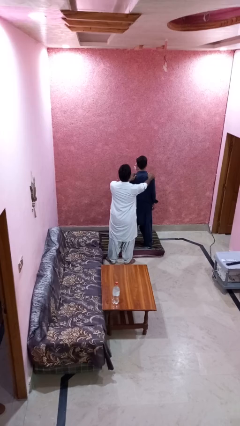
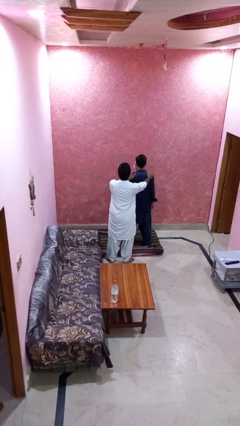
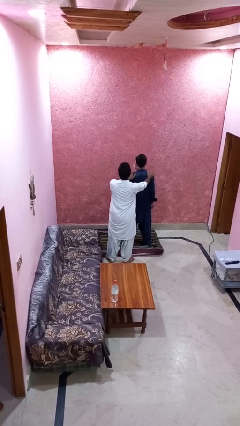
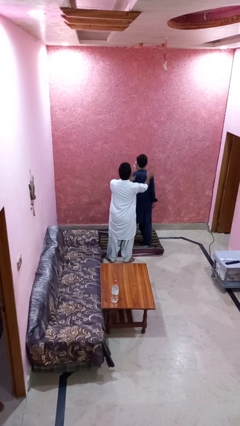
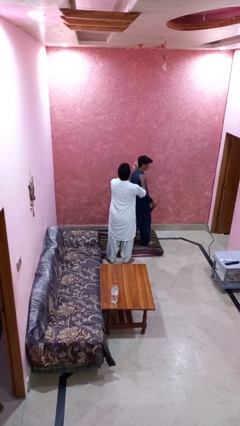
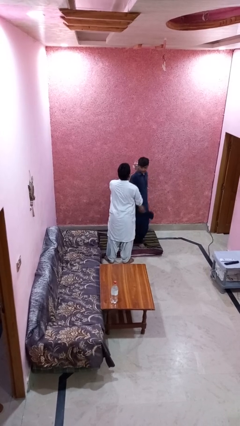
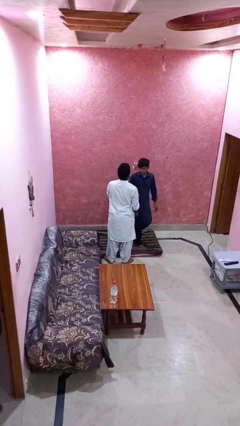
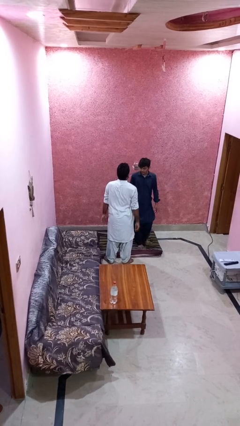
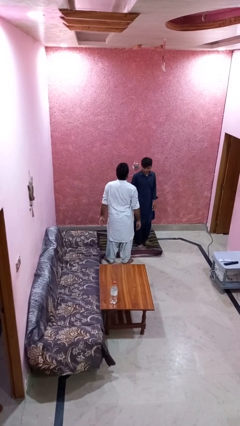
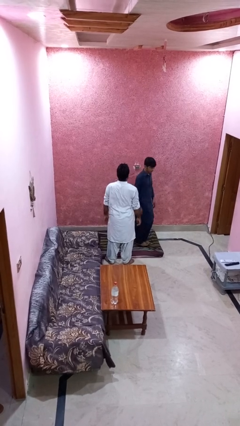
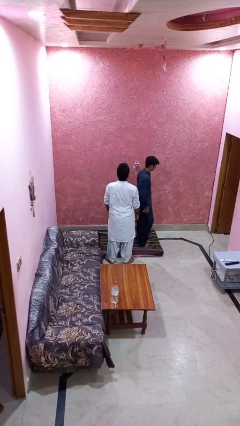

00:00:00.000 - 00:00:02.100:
person spins person around

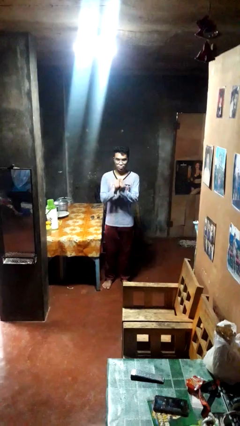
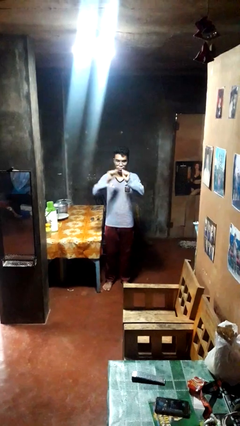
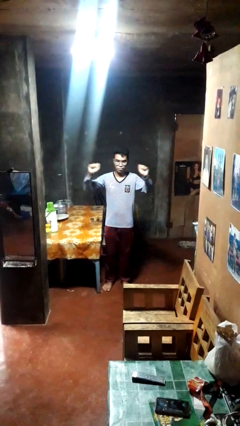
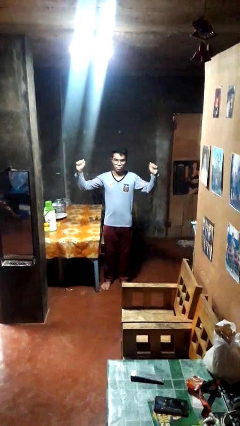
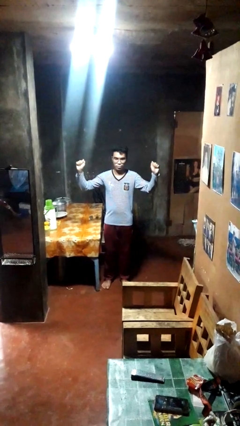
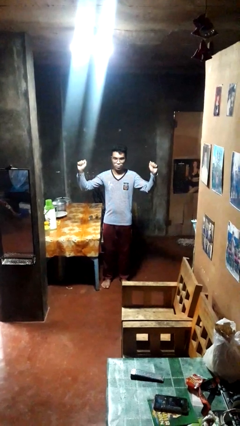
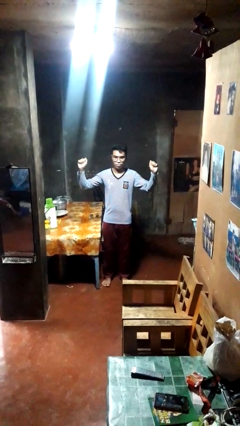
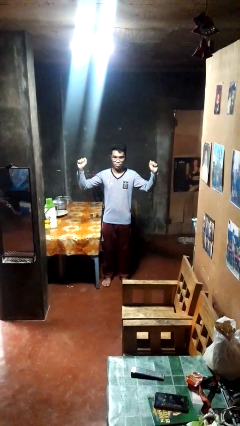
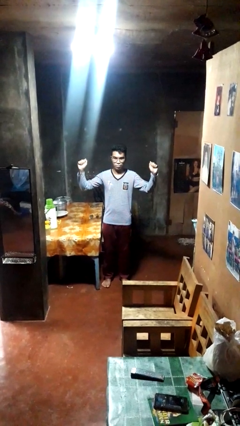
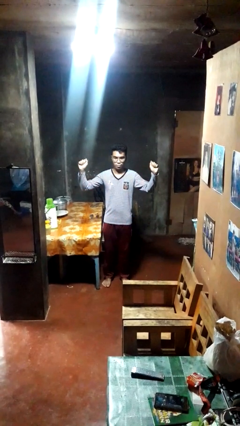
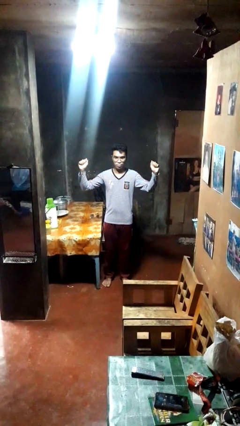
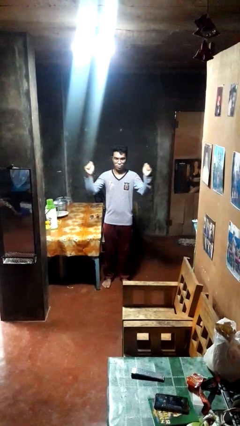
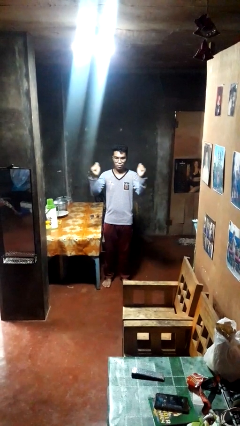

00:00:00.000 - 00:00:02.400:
person gestures zoom in

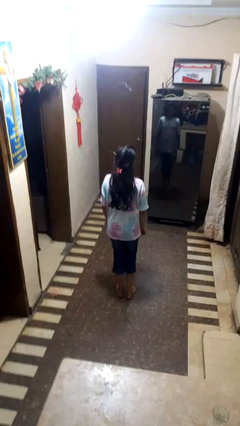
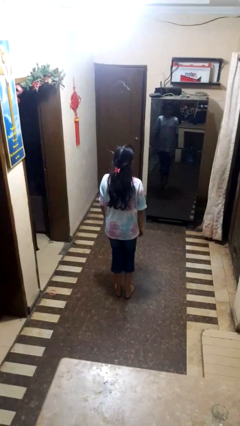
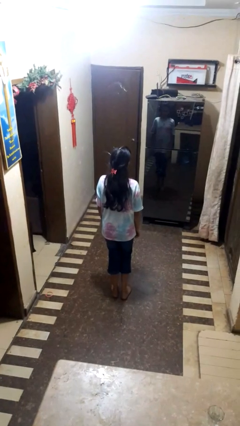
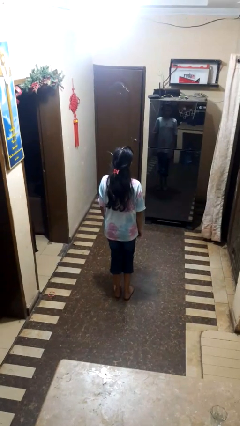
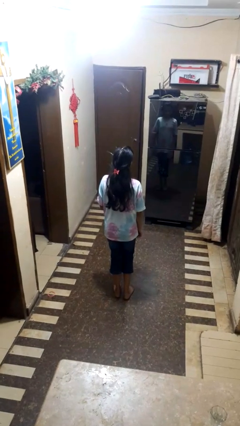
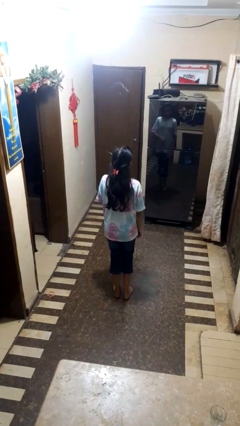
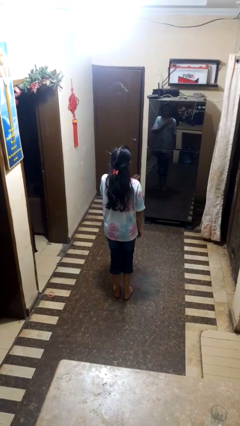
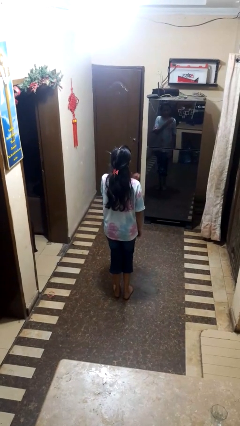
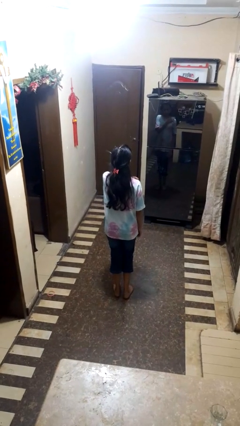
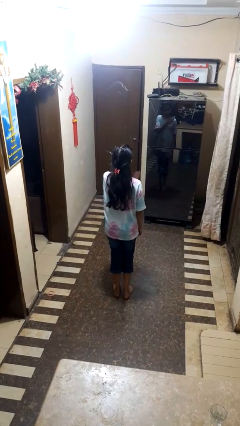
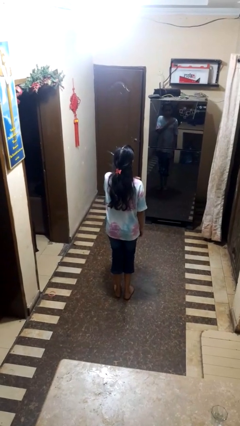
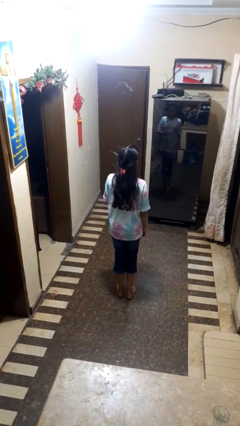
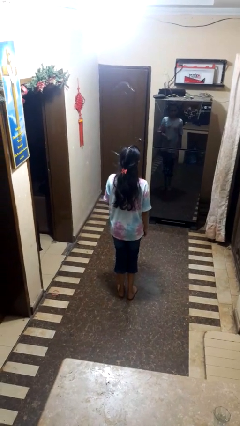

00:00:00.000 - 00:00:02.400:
person drums on chest

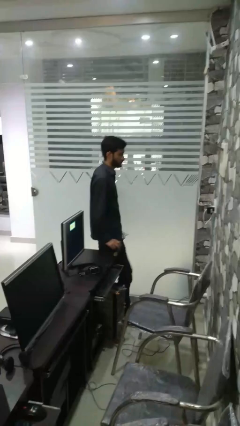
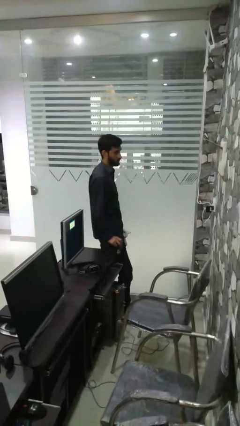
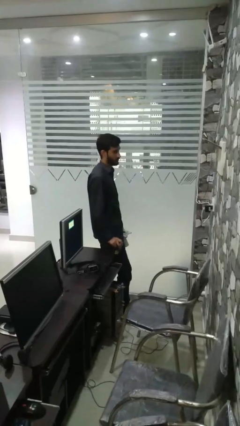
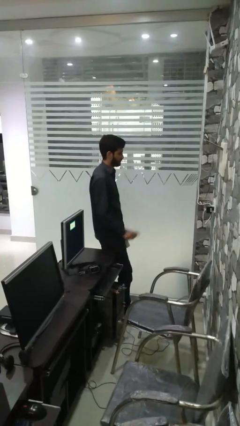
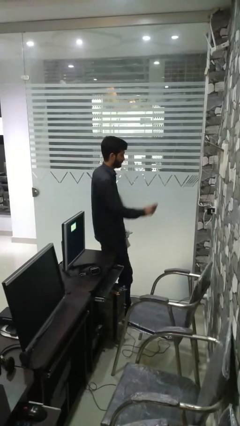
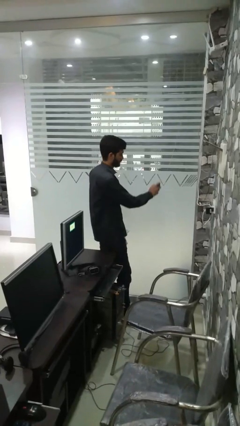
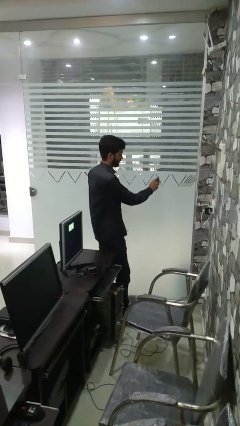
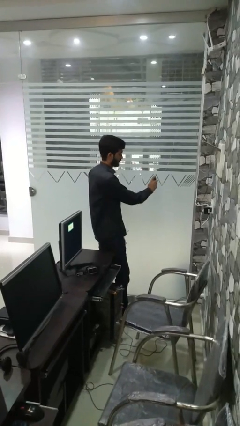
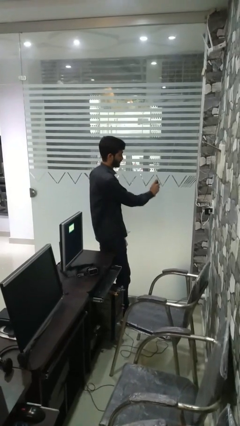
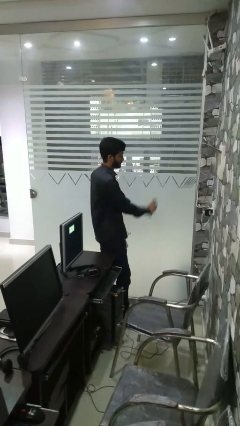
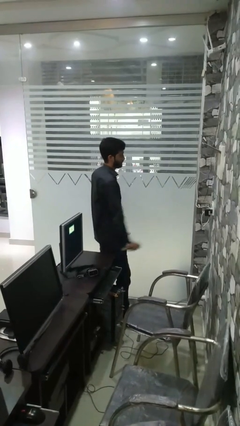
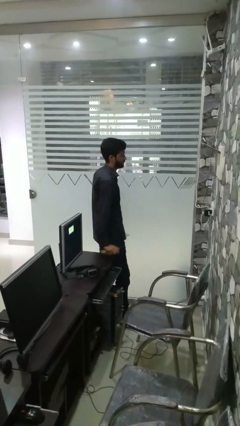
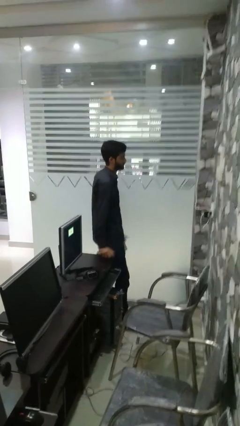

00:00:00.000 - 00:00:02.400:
person sprays from bottle

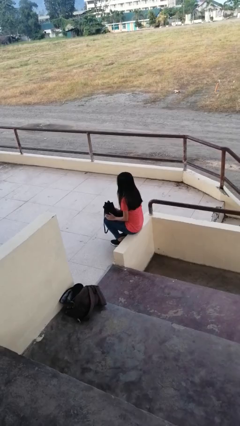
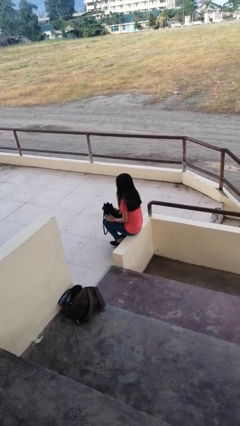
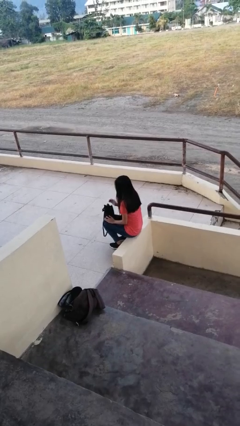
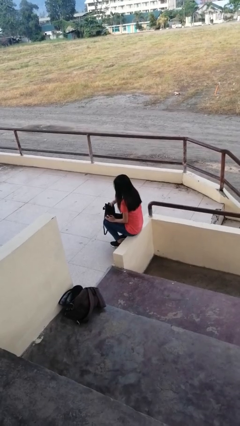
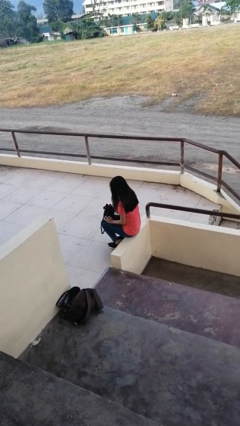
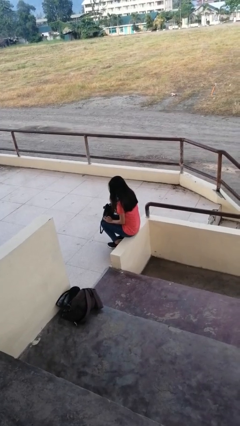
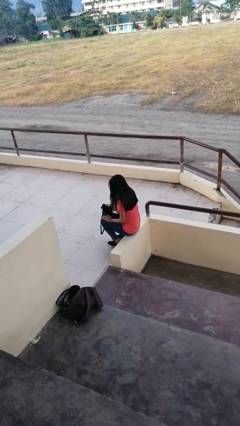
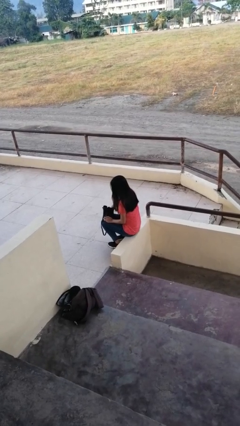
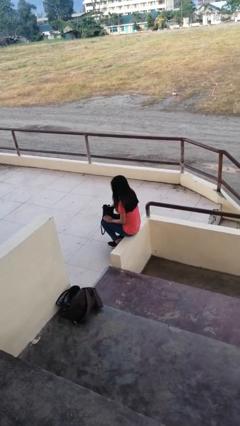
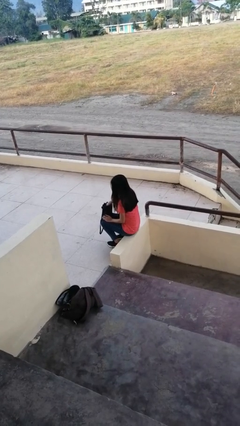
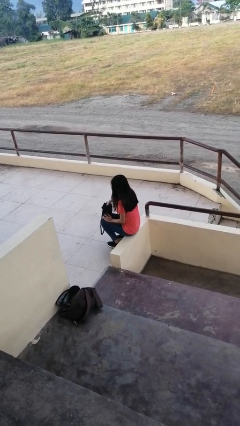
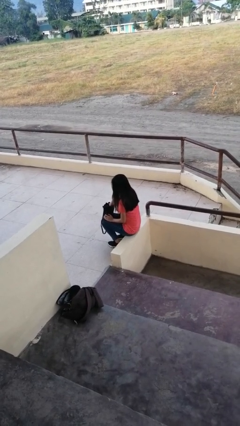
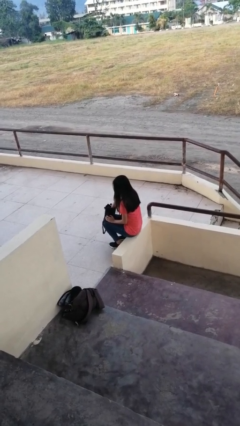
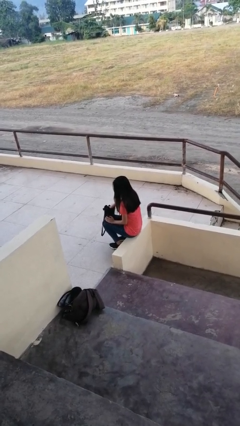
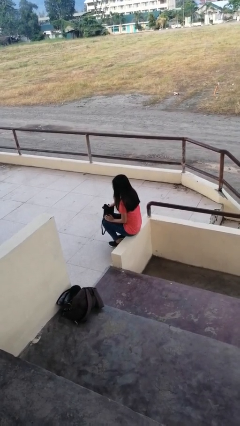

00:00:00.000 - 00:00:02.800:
person searches in purse

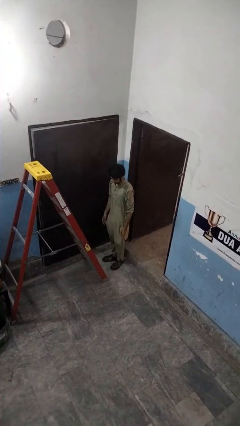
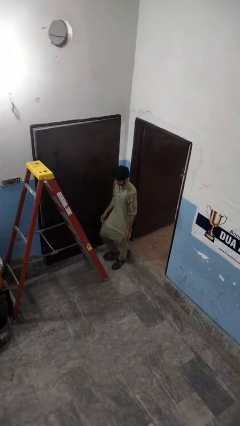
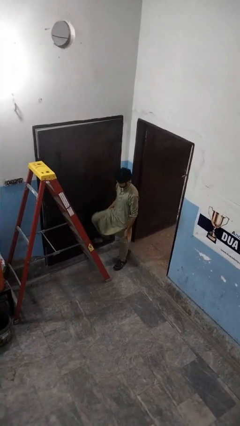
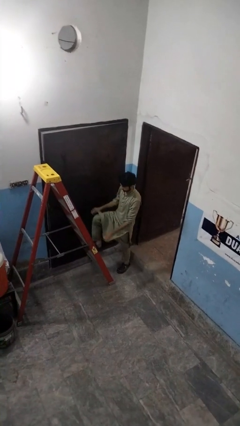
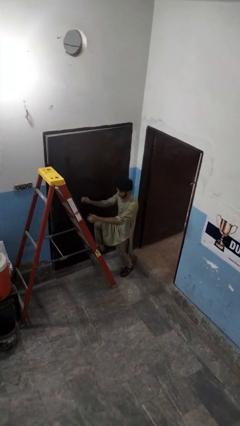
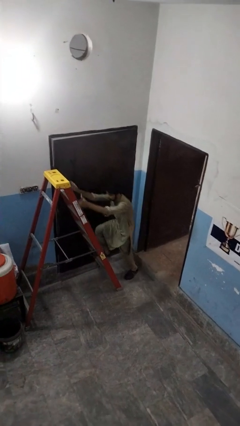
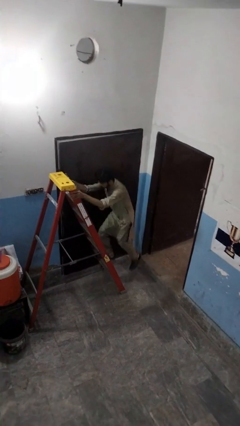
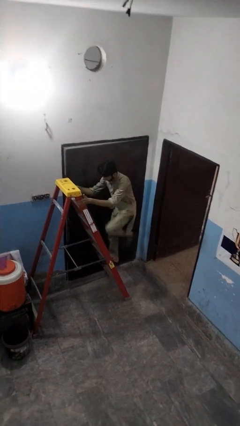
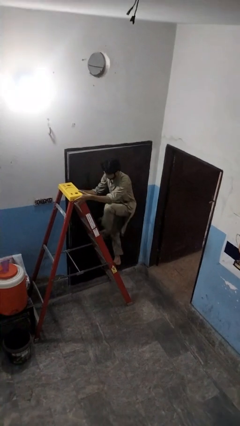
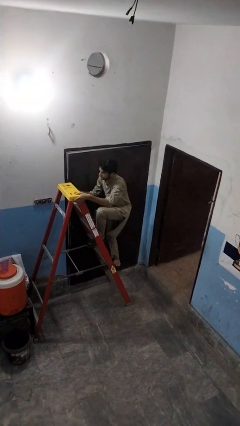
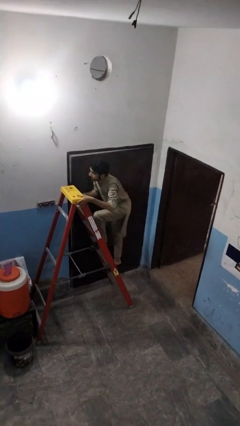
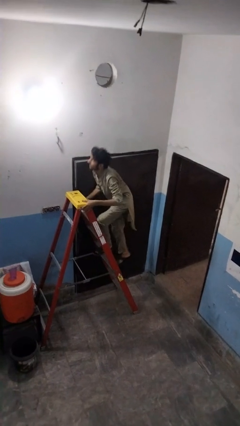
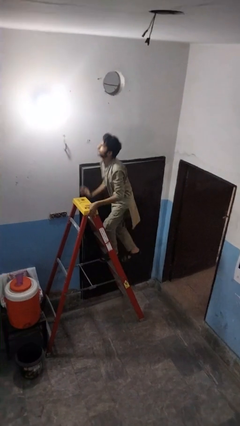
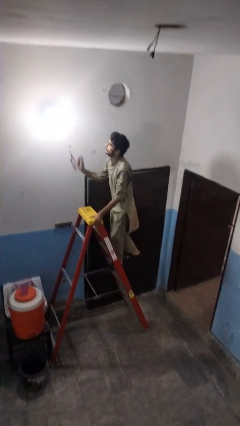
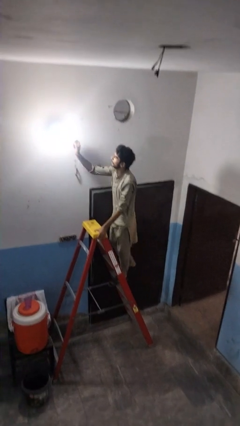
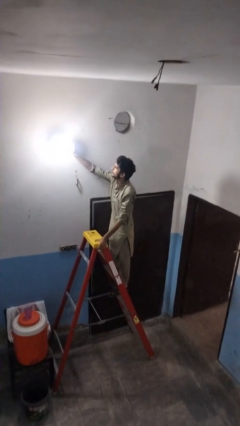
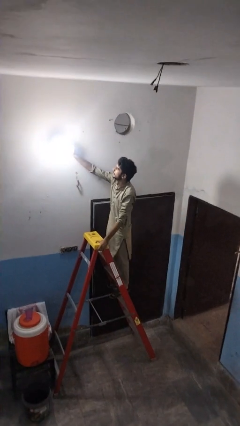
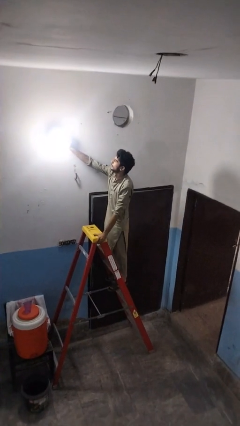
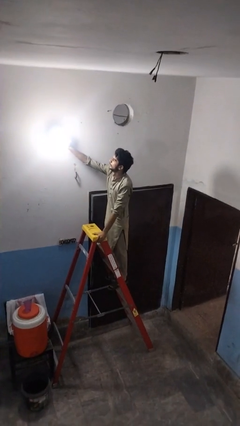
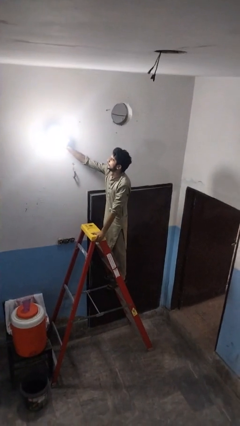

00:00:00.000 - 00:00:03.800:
person climbs up ladder

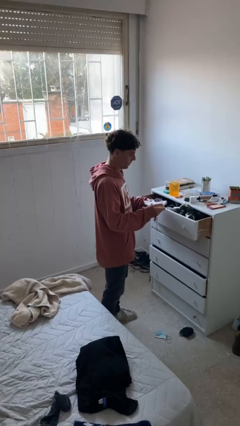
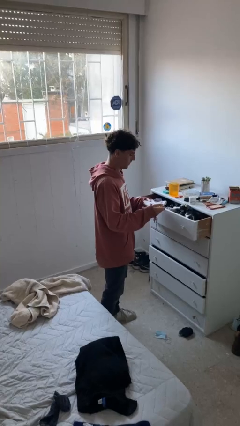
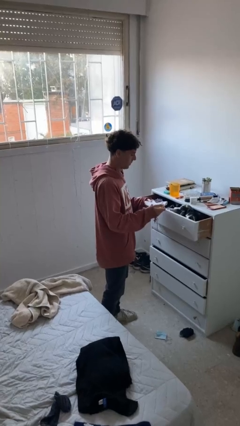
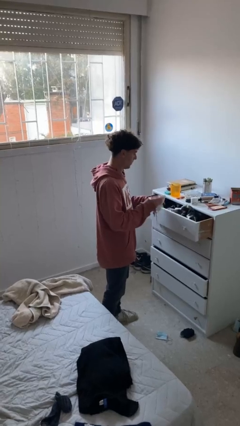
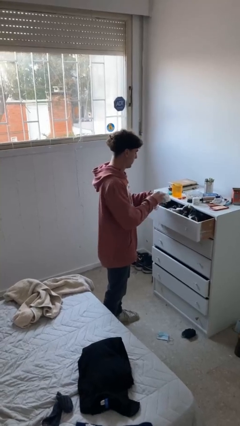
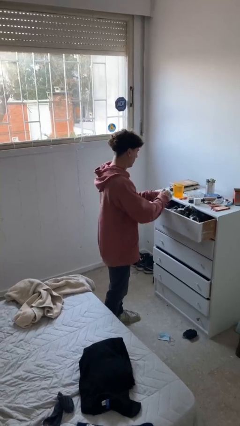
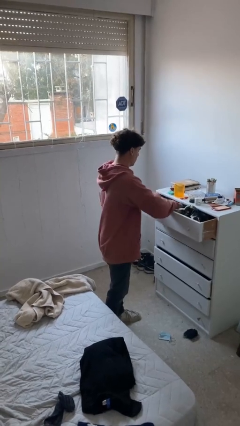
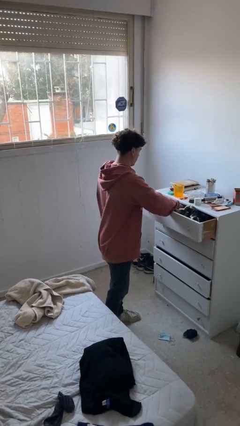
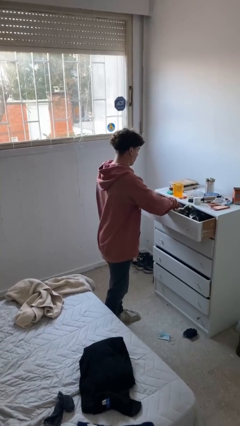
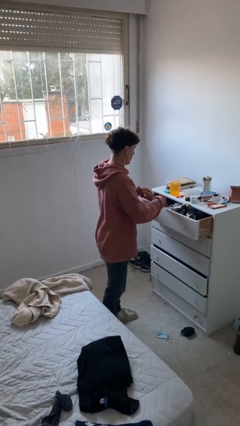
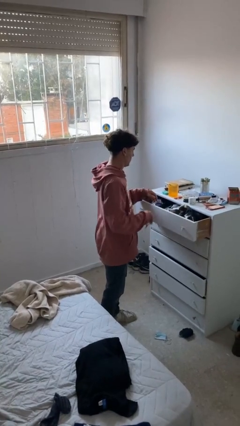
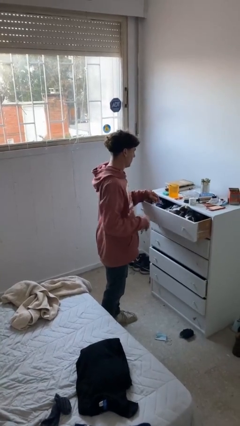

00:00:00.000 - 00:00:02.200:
person puts clothes into dresser
